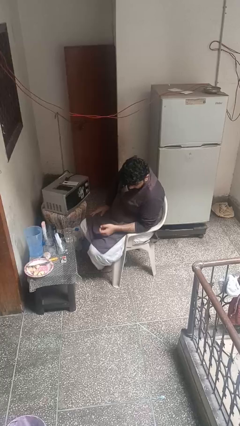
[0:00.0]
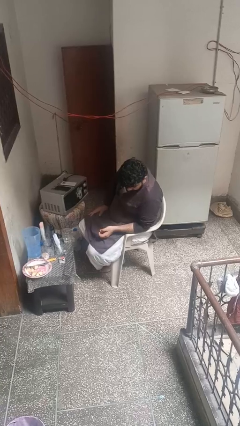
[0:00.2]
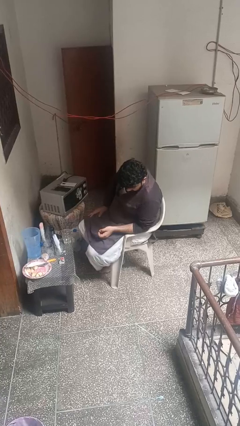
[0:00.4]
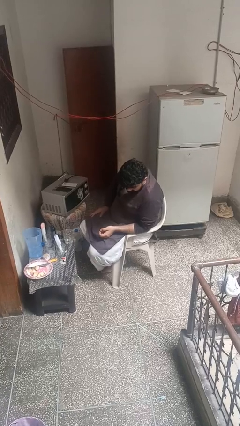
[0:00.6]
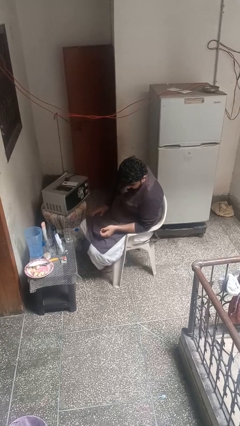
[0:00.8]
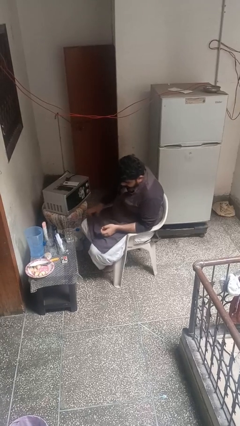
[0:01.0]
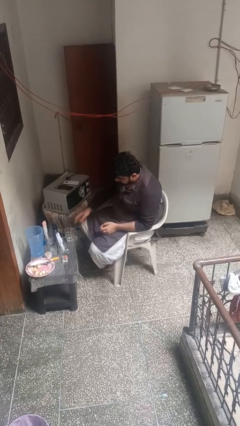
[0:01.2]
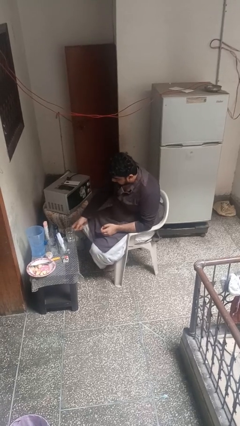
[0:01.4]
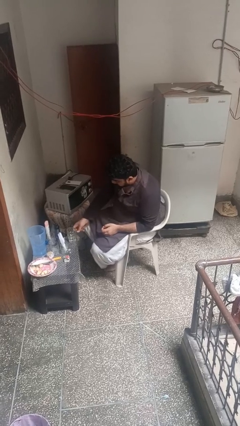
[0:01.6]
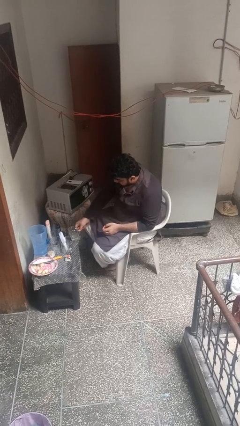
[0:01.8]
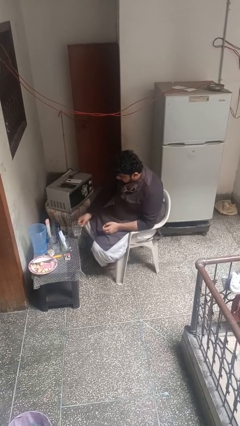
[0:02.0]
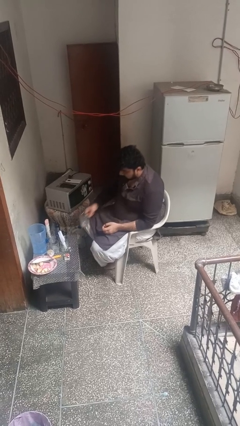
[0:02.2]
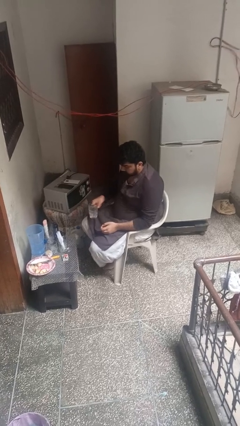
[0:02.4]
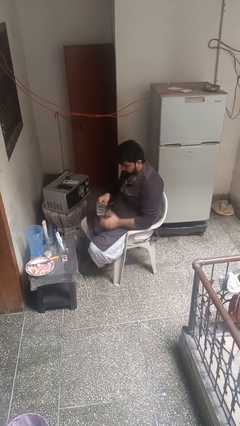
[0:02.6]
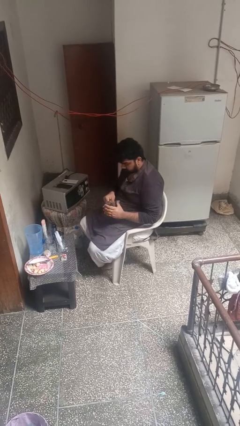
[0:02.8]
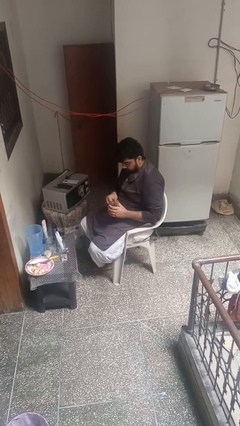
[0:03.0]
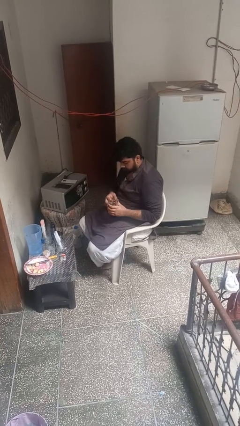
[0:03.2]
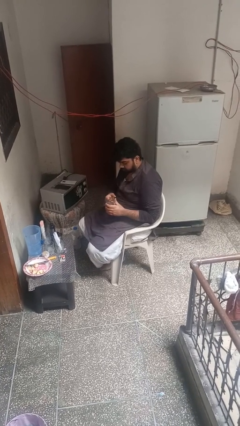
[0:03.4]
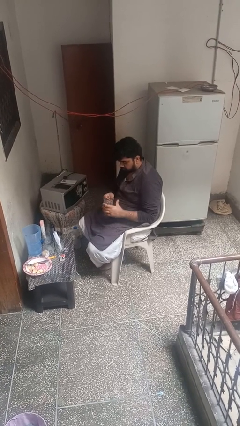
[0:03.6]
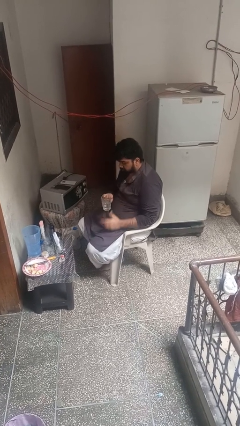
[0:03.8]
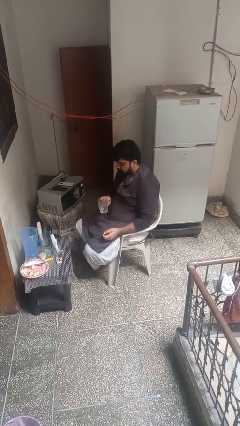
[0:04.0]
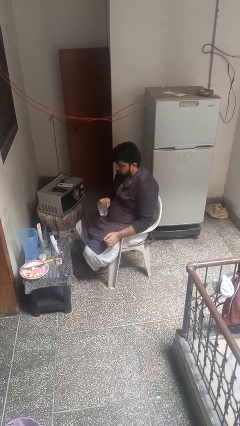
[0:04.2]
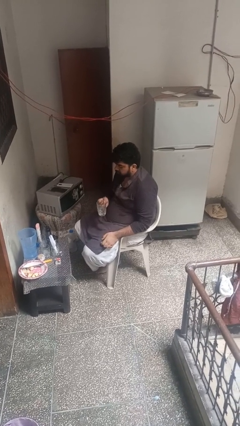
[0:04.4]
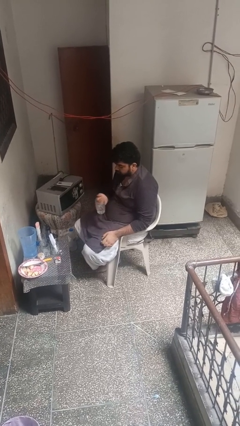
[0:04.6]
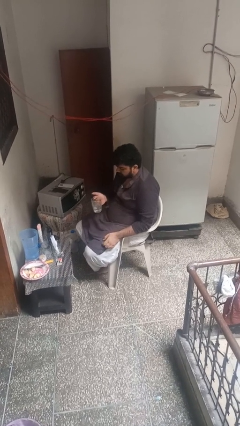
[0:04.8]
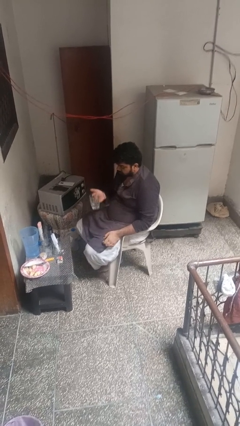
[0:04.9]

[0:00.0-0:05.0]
person picks up object from table

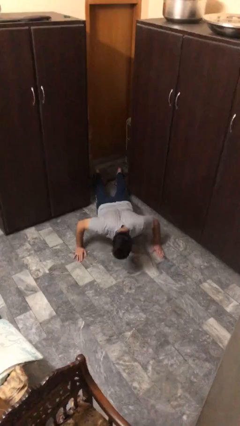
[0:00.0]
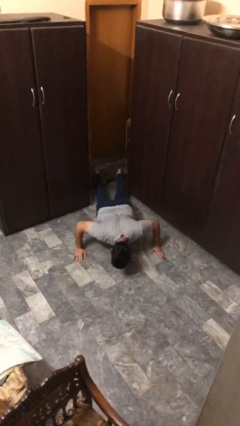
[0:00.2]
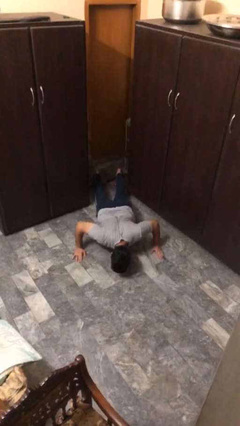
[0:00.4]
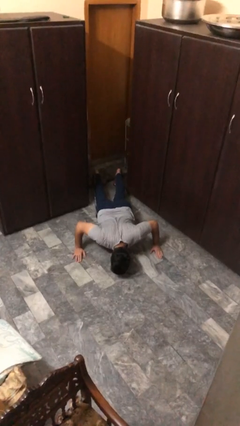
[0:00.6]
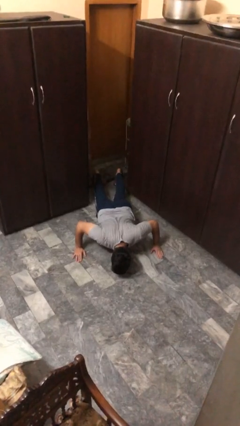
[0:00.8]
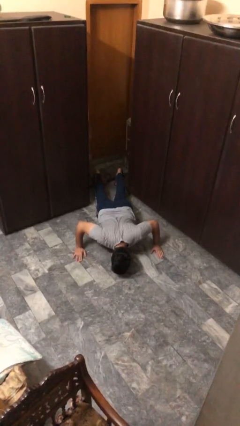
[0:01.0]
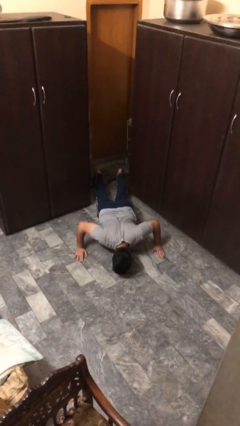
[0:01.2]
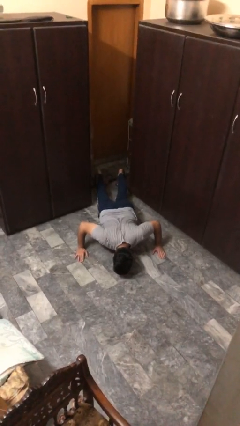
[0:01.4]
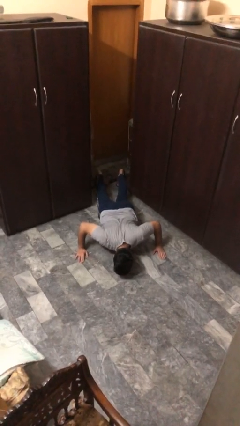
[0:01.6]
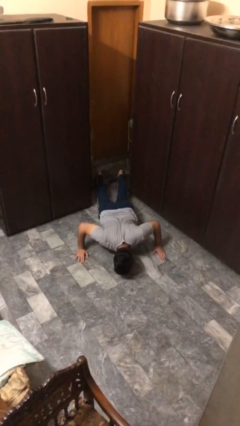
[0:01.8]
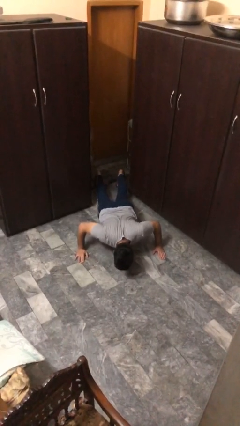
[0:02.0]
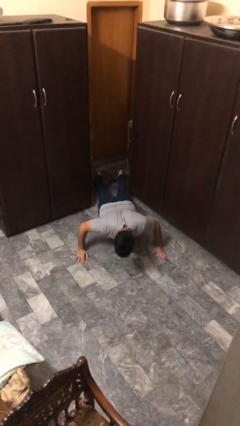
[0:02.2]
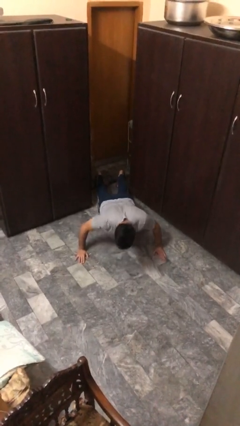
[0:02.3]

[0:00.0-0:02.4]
person exercises with pushup

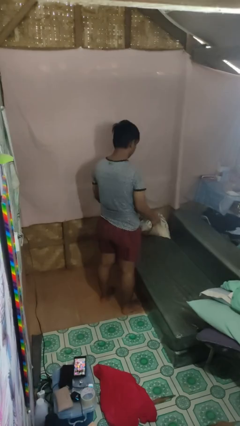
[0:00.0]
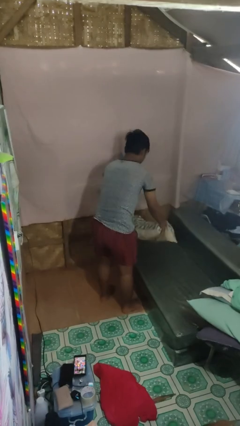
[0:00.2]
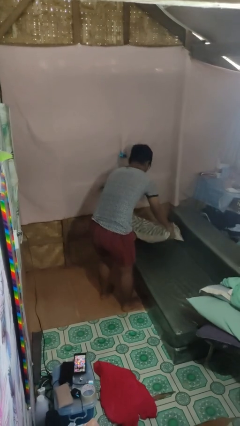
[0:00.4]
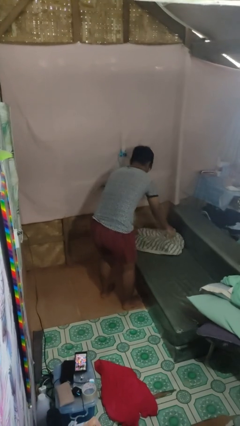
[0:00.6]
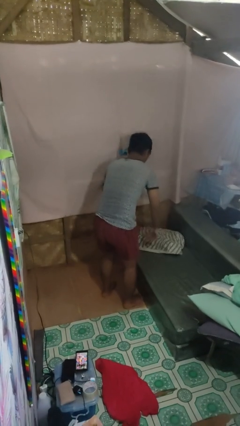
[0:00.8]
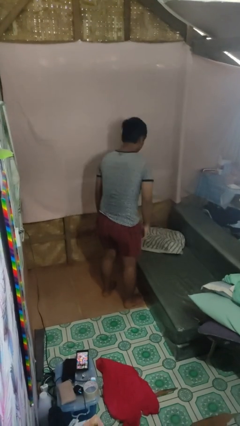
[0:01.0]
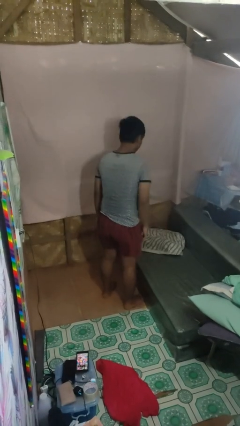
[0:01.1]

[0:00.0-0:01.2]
person puts down object on couch

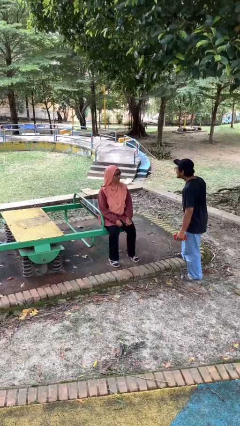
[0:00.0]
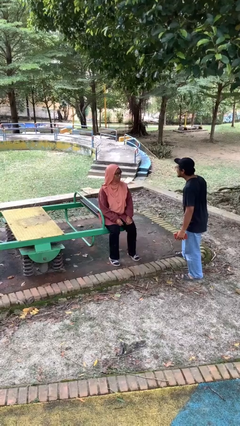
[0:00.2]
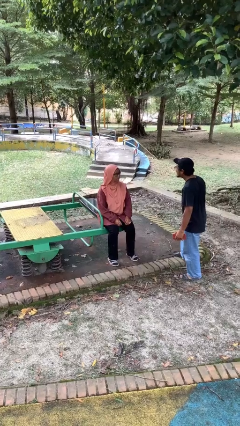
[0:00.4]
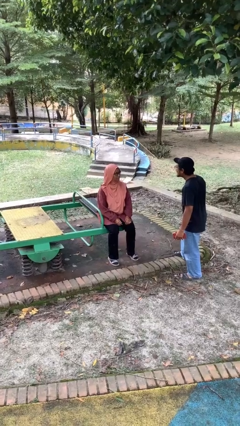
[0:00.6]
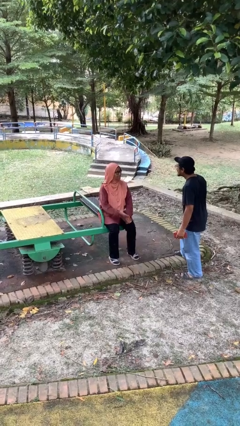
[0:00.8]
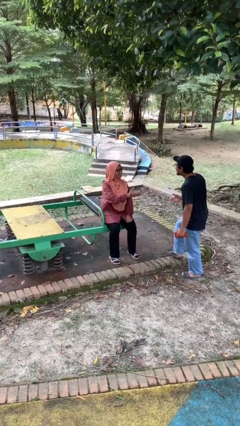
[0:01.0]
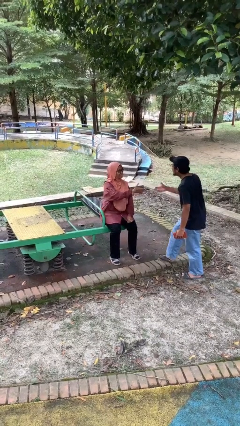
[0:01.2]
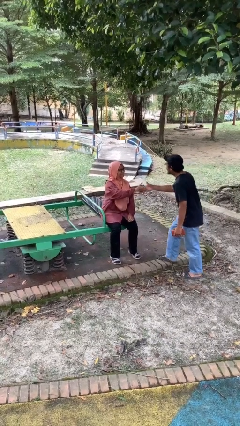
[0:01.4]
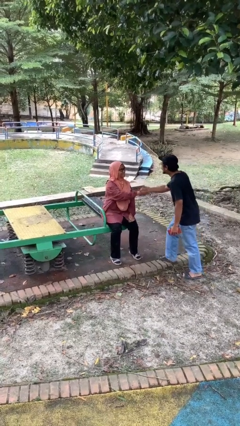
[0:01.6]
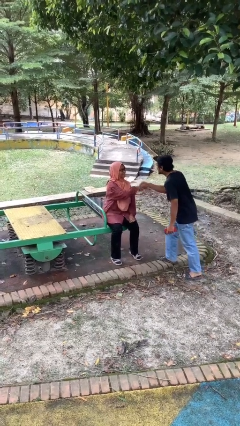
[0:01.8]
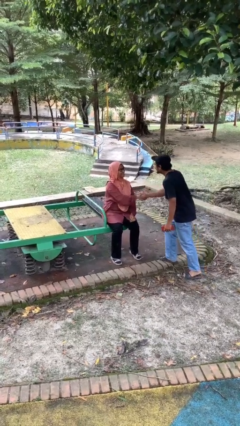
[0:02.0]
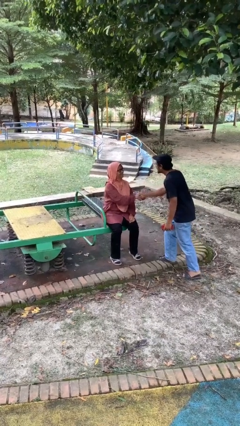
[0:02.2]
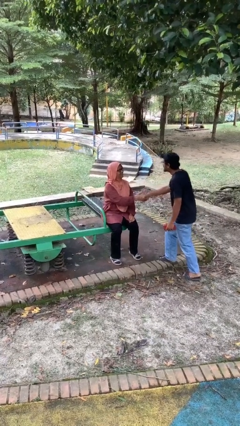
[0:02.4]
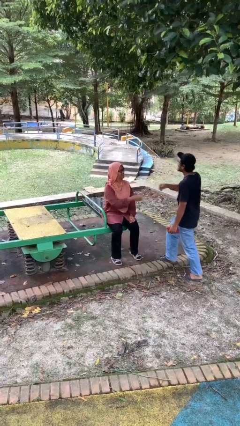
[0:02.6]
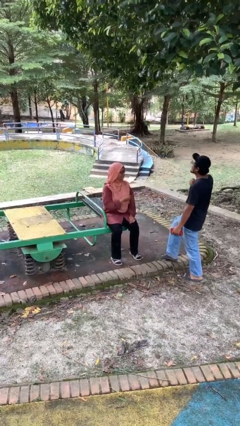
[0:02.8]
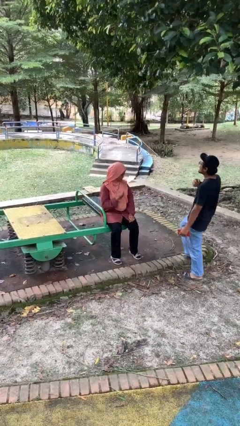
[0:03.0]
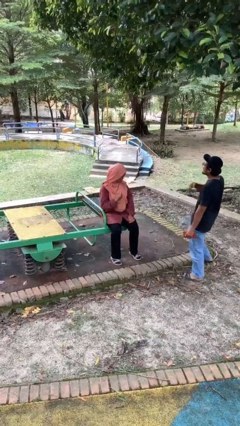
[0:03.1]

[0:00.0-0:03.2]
person shakes hand

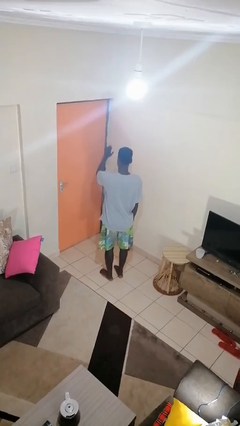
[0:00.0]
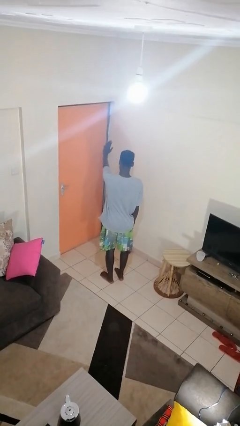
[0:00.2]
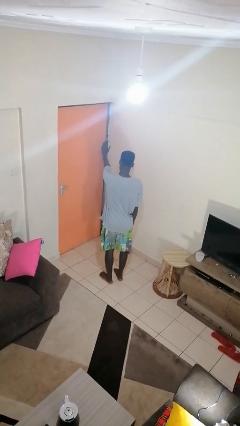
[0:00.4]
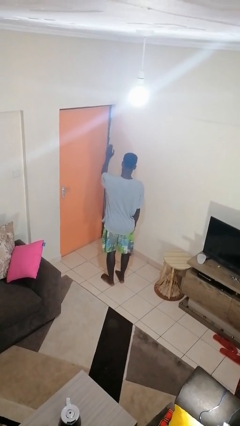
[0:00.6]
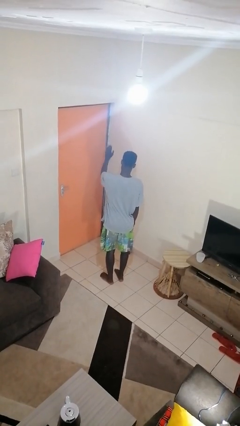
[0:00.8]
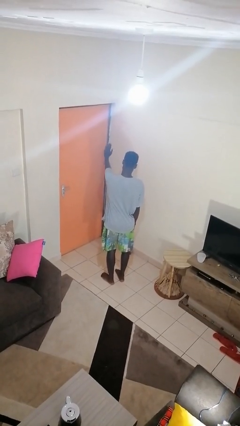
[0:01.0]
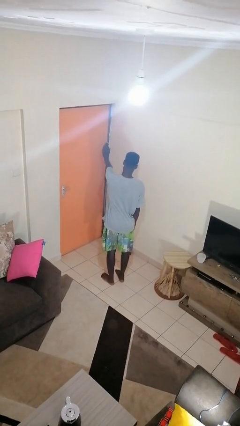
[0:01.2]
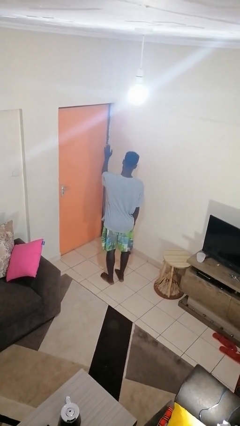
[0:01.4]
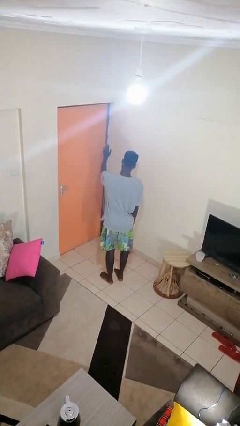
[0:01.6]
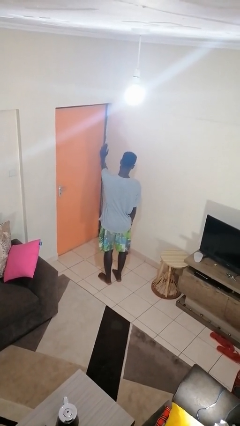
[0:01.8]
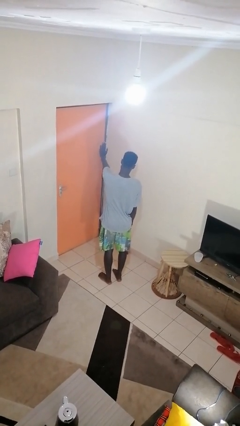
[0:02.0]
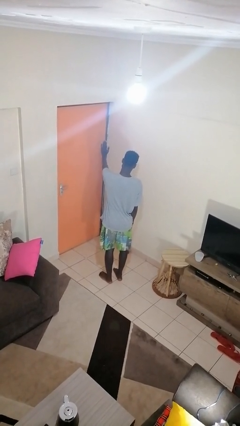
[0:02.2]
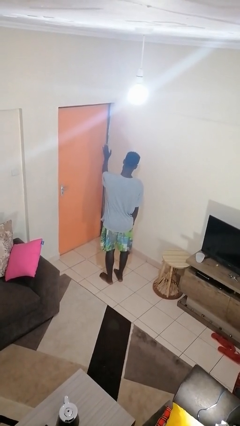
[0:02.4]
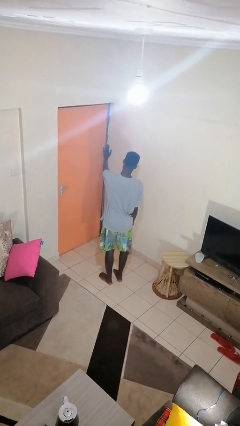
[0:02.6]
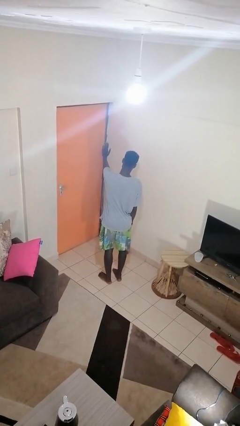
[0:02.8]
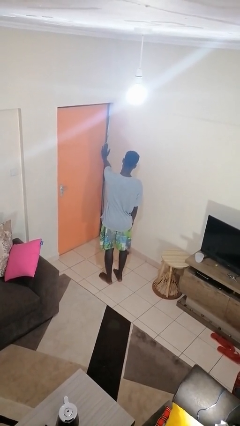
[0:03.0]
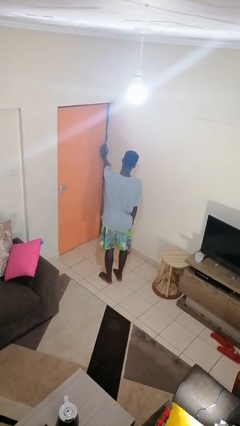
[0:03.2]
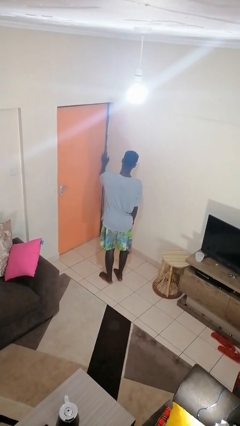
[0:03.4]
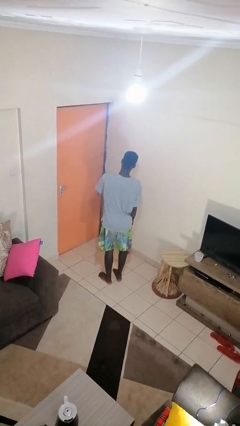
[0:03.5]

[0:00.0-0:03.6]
person gestures stop

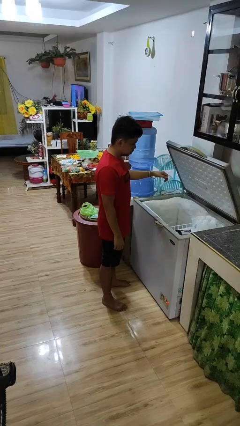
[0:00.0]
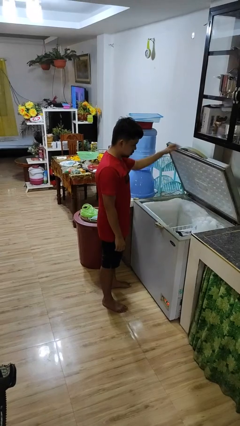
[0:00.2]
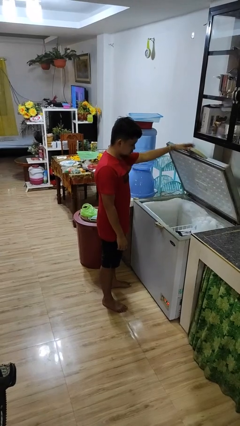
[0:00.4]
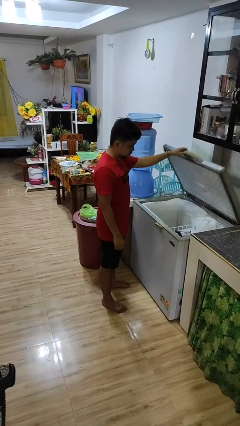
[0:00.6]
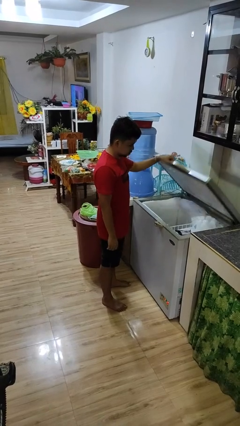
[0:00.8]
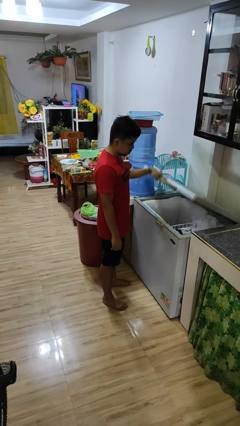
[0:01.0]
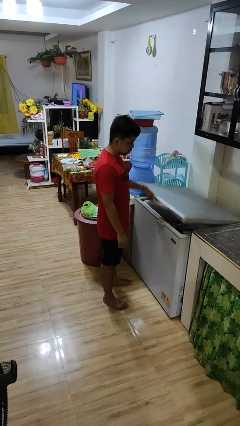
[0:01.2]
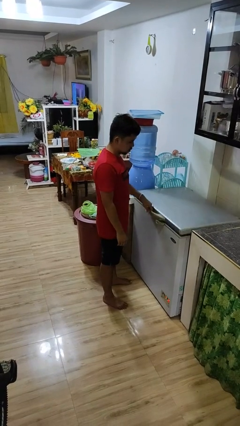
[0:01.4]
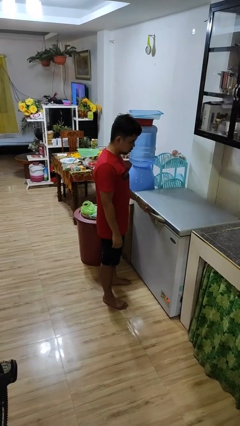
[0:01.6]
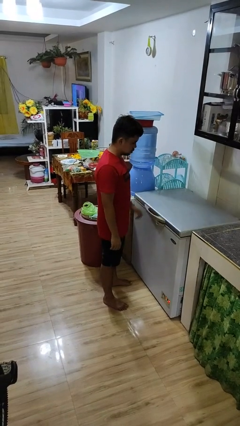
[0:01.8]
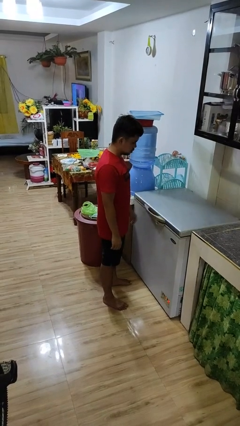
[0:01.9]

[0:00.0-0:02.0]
person closes refrigerator

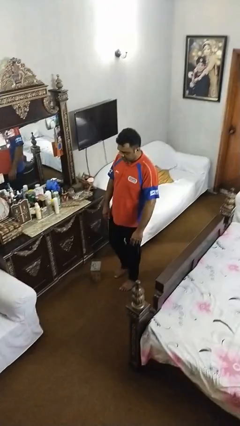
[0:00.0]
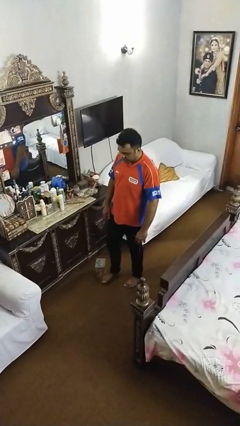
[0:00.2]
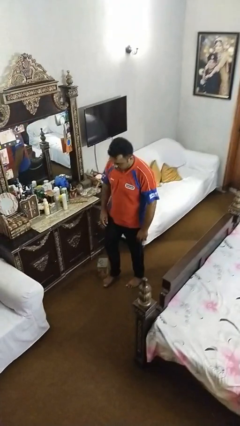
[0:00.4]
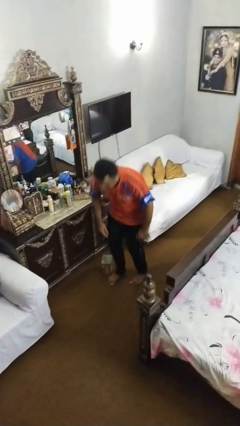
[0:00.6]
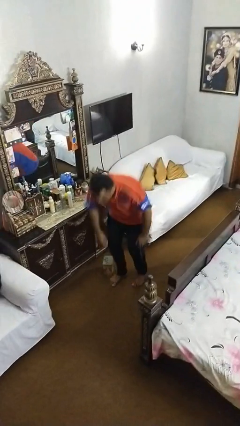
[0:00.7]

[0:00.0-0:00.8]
person trips on object on floor
